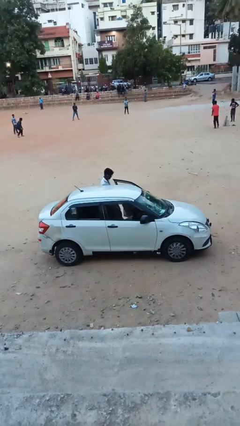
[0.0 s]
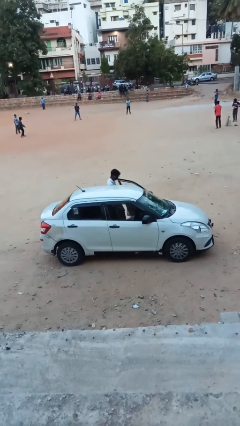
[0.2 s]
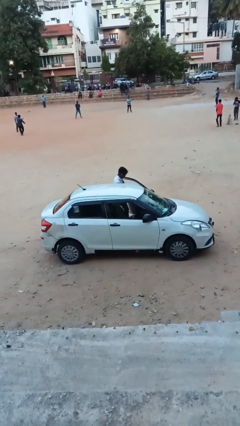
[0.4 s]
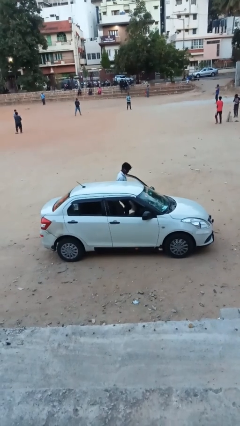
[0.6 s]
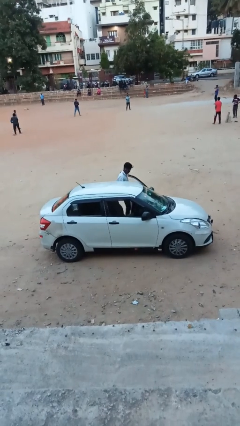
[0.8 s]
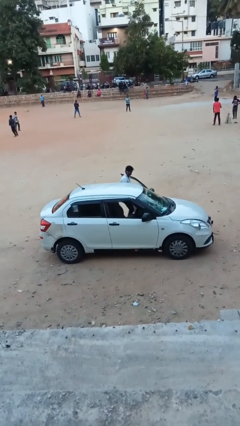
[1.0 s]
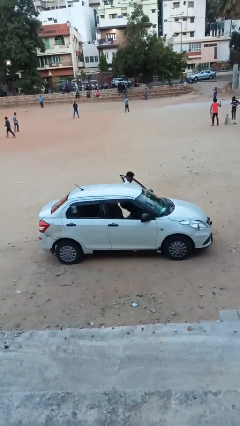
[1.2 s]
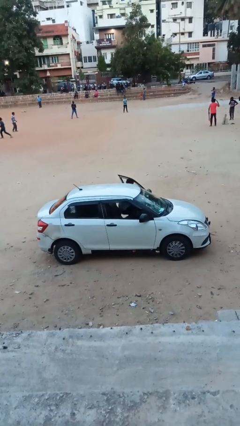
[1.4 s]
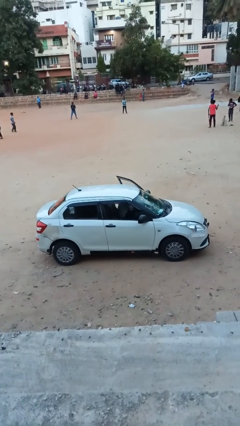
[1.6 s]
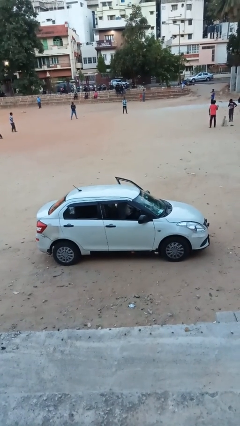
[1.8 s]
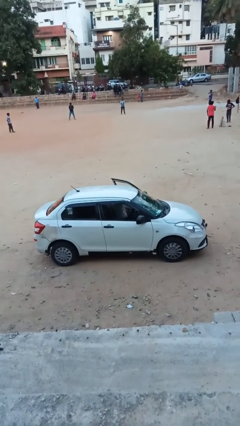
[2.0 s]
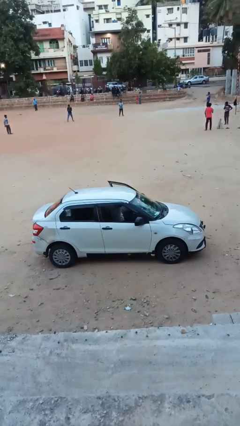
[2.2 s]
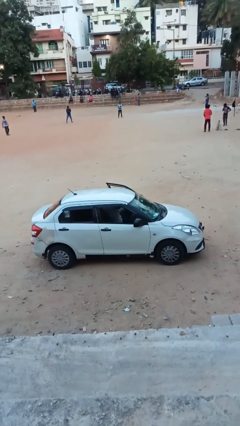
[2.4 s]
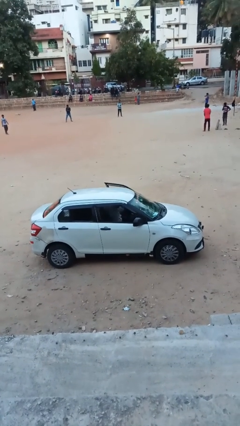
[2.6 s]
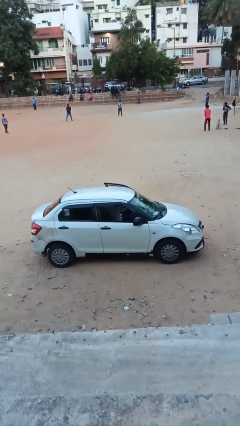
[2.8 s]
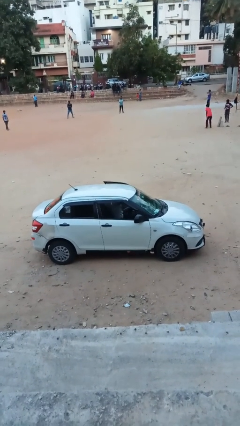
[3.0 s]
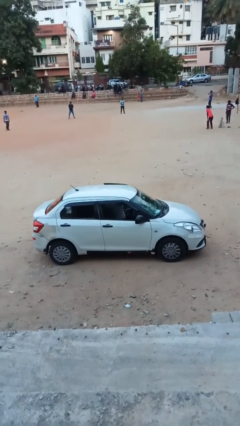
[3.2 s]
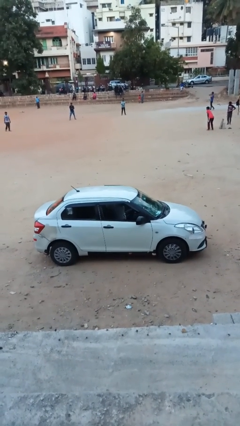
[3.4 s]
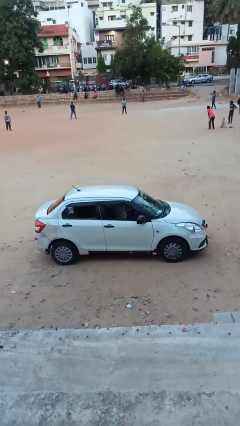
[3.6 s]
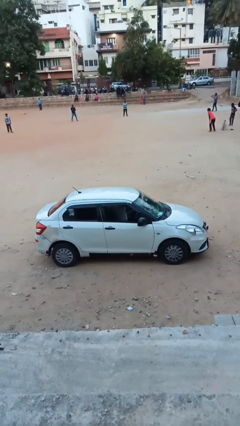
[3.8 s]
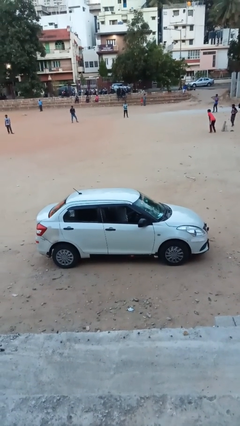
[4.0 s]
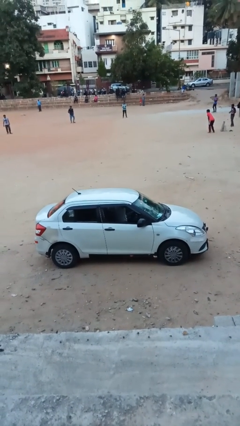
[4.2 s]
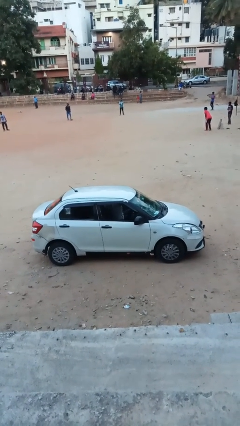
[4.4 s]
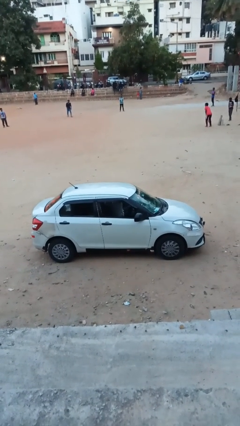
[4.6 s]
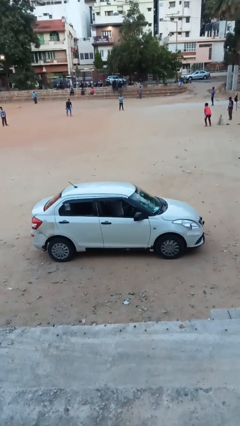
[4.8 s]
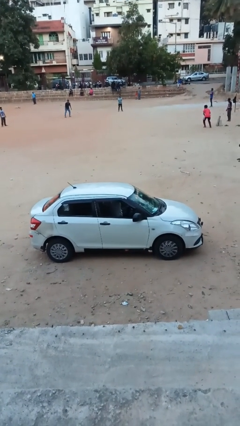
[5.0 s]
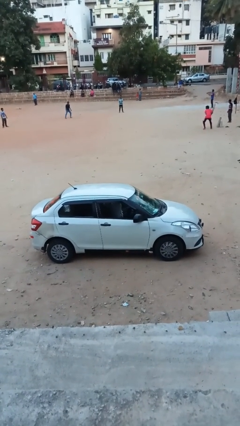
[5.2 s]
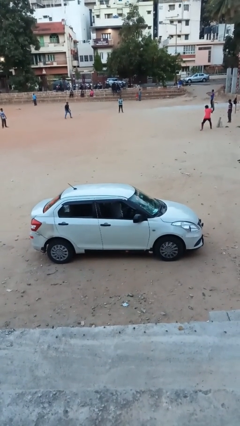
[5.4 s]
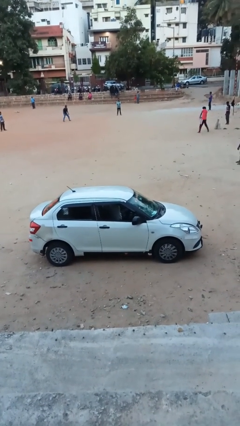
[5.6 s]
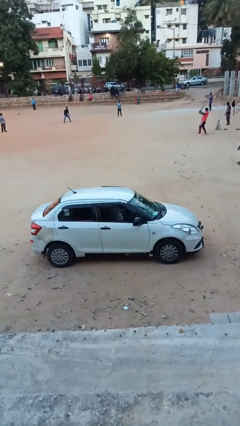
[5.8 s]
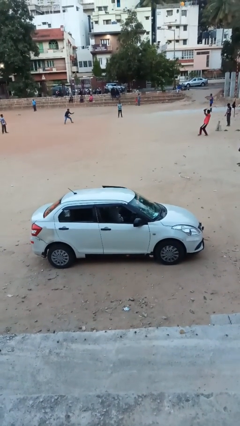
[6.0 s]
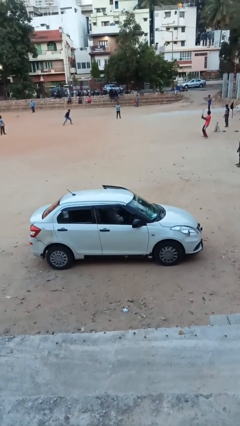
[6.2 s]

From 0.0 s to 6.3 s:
car picks up person

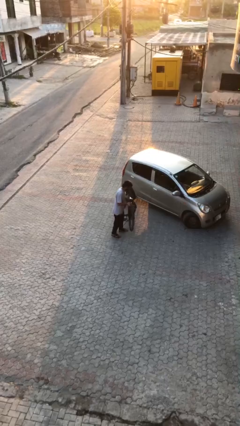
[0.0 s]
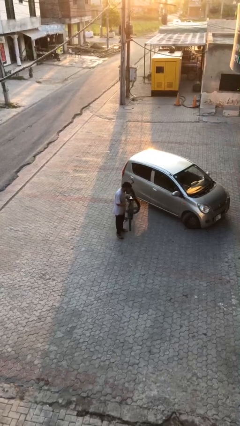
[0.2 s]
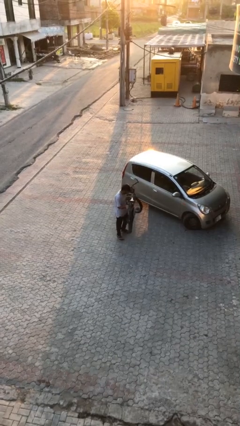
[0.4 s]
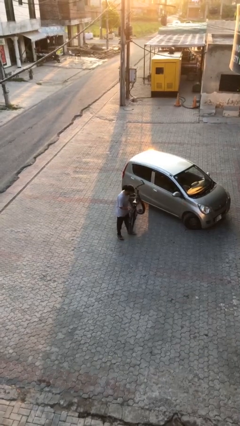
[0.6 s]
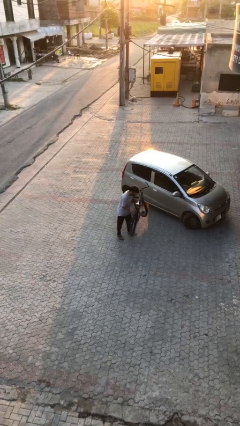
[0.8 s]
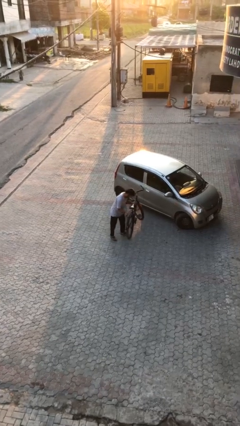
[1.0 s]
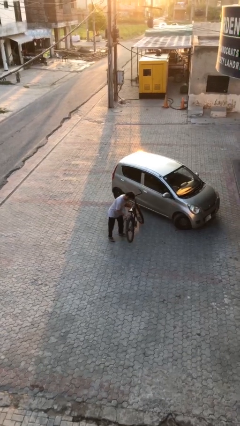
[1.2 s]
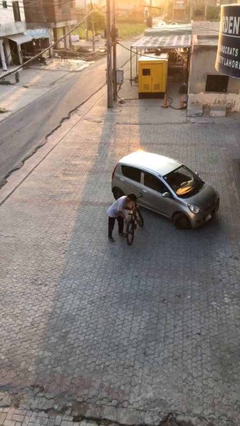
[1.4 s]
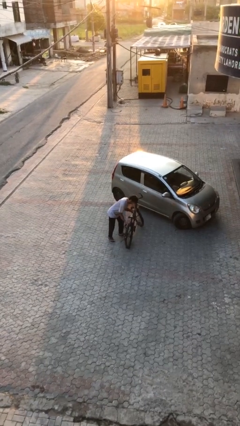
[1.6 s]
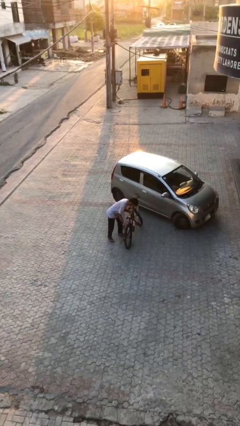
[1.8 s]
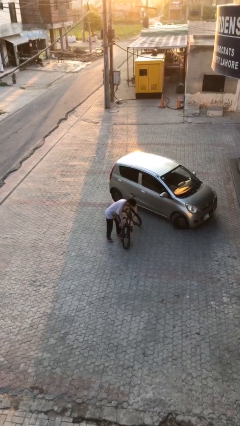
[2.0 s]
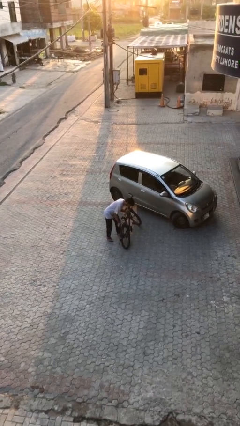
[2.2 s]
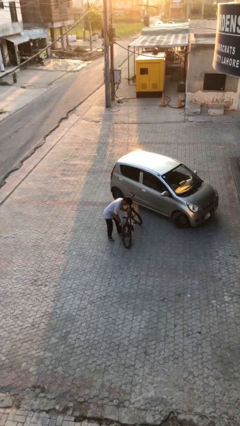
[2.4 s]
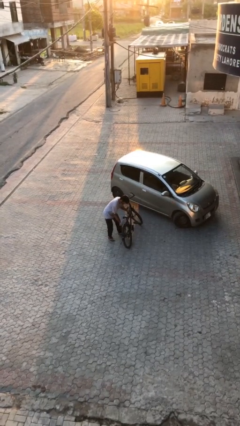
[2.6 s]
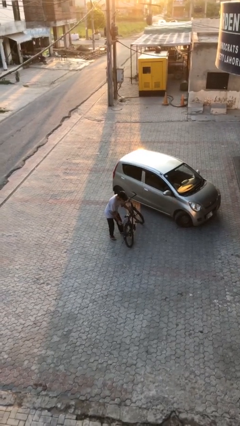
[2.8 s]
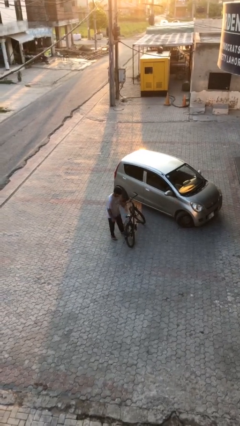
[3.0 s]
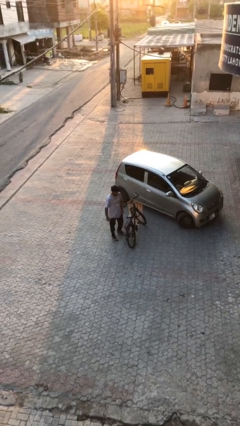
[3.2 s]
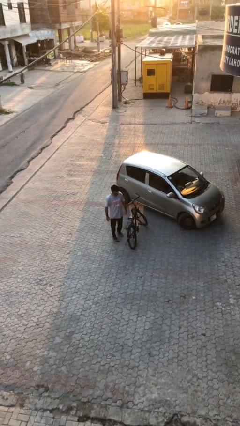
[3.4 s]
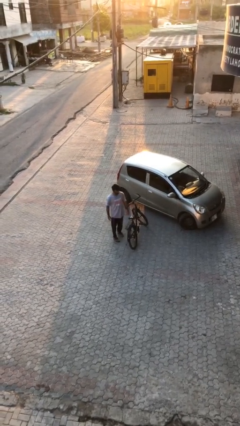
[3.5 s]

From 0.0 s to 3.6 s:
person puts down object on floor

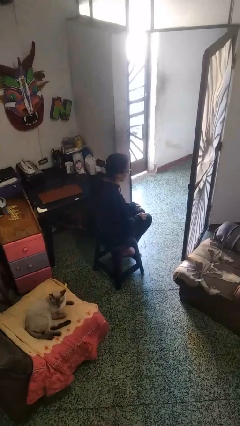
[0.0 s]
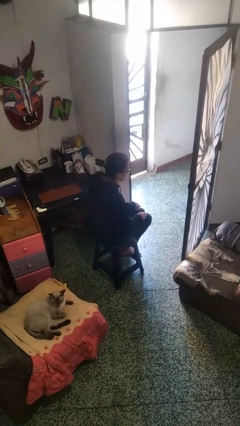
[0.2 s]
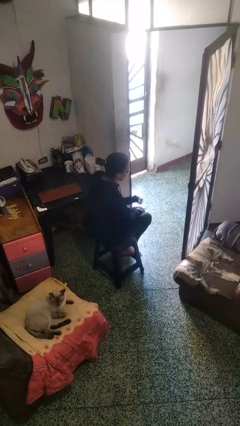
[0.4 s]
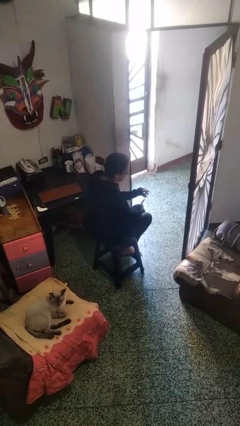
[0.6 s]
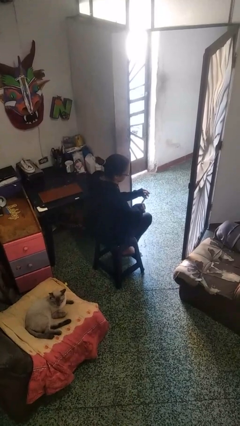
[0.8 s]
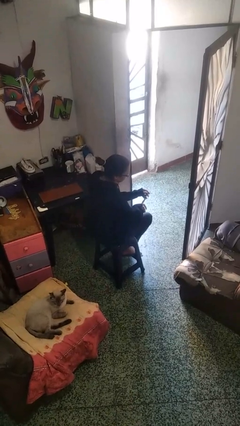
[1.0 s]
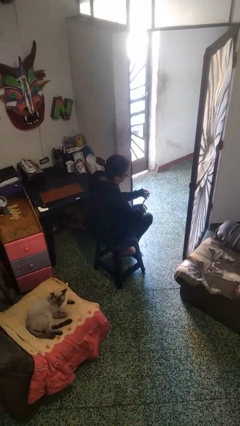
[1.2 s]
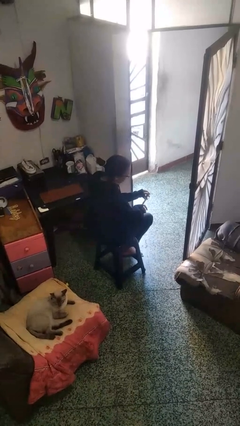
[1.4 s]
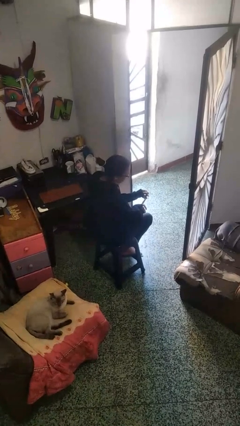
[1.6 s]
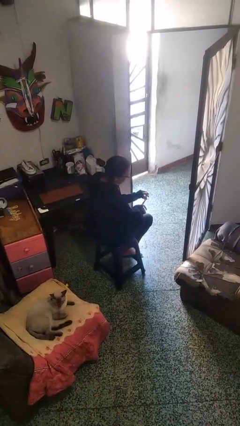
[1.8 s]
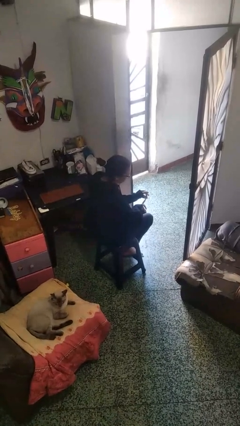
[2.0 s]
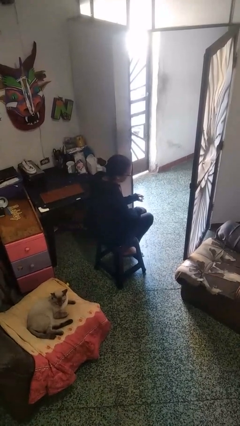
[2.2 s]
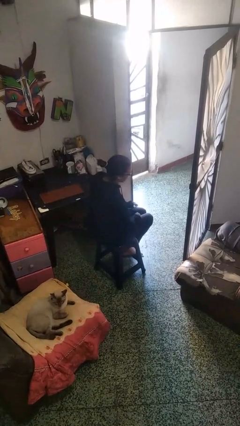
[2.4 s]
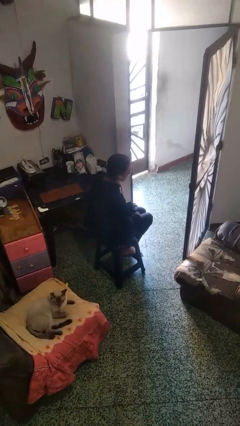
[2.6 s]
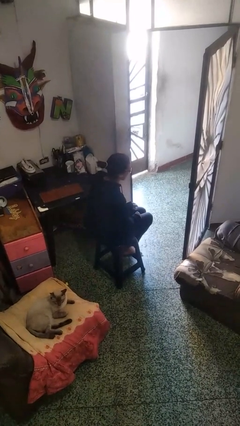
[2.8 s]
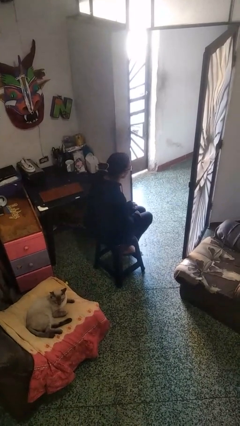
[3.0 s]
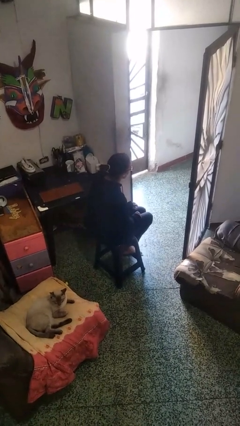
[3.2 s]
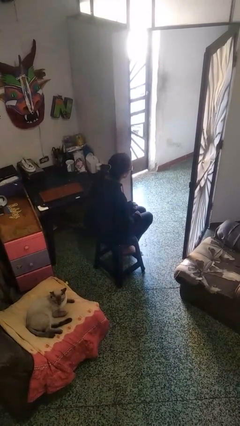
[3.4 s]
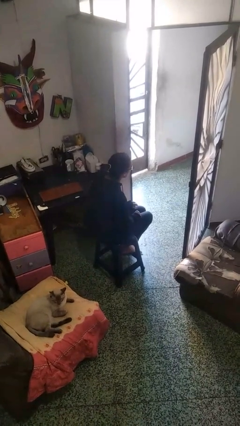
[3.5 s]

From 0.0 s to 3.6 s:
person clips fingernails

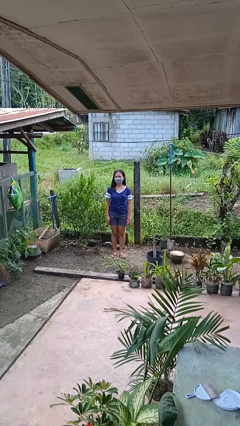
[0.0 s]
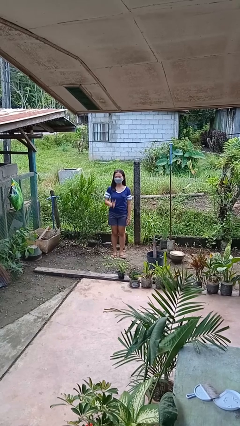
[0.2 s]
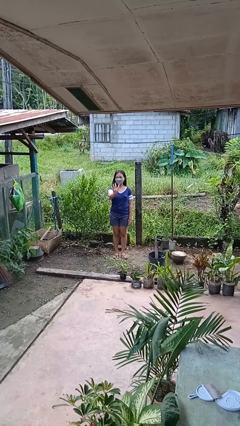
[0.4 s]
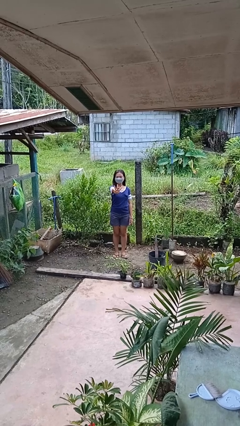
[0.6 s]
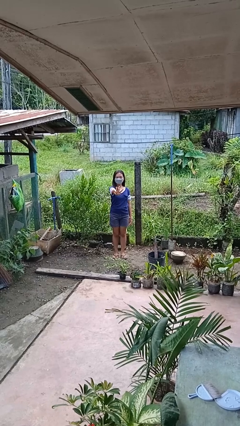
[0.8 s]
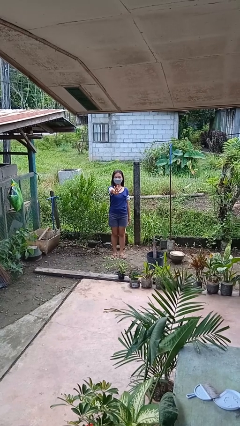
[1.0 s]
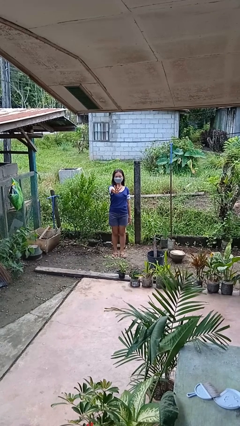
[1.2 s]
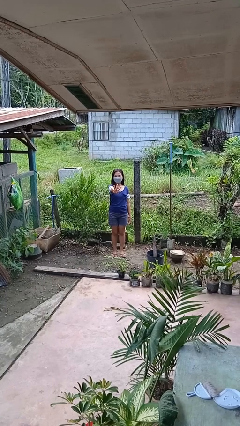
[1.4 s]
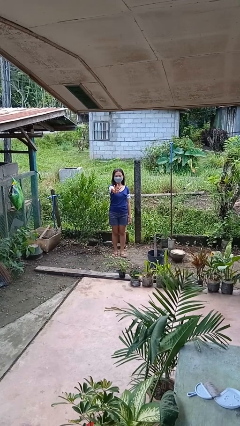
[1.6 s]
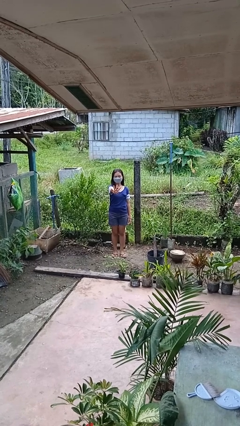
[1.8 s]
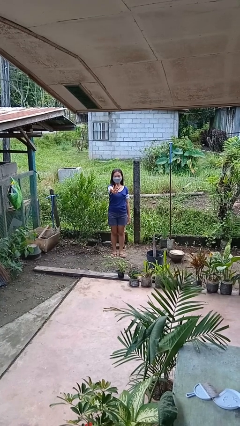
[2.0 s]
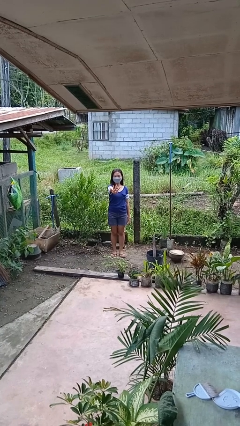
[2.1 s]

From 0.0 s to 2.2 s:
person gestures number four

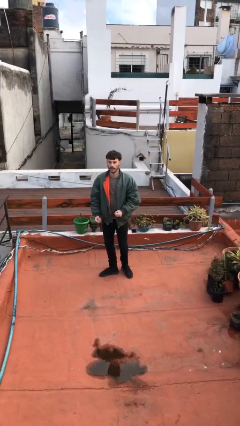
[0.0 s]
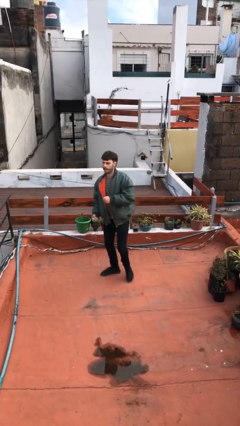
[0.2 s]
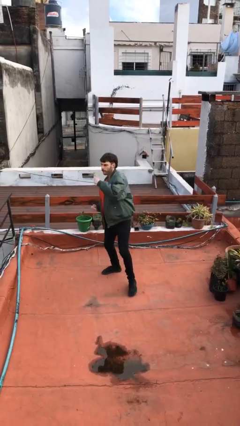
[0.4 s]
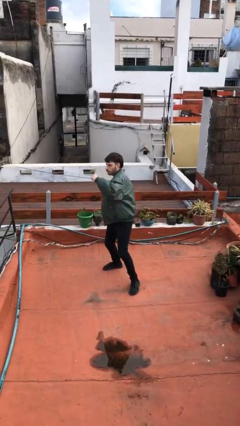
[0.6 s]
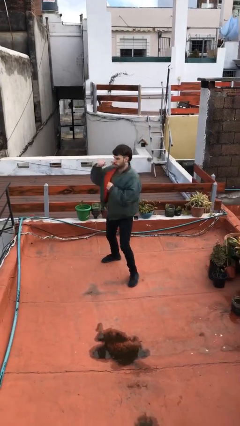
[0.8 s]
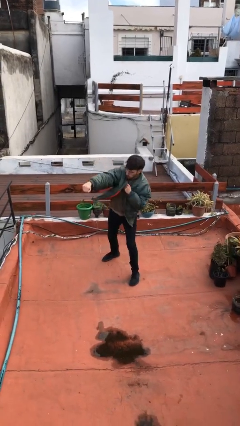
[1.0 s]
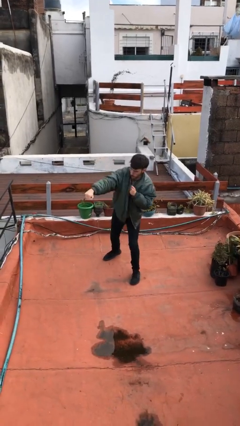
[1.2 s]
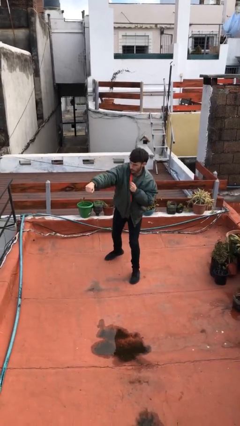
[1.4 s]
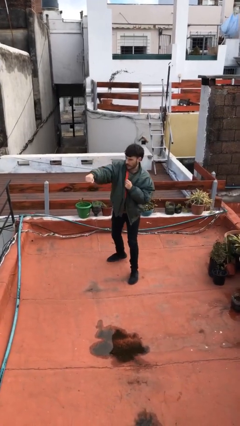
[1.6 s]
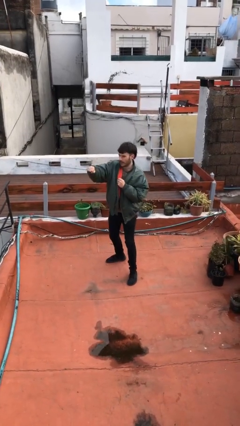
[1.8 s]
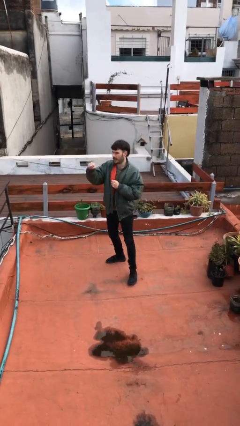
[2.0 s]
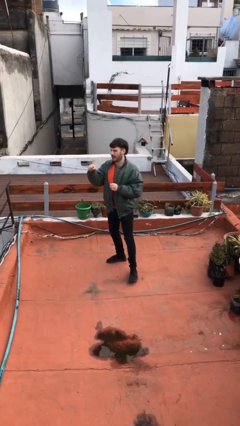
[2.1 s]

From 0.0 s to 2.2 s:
person punches
